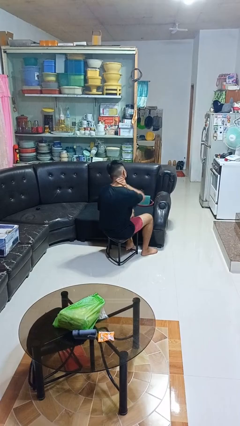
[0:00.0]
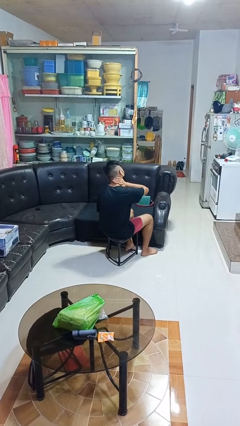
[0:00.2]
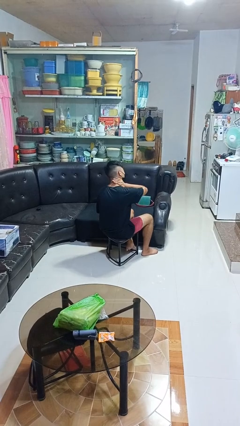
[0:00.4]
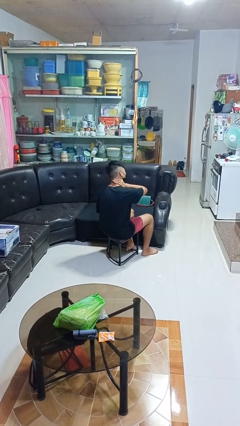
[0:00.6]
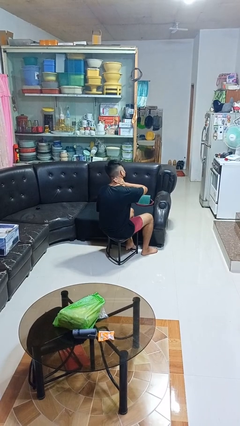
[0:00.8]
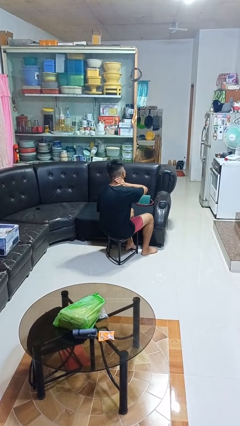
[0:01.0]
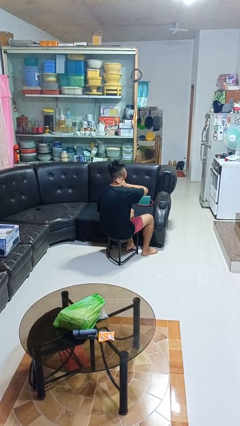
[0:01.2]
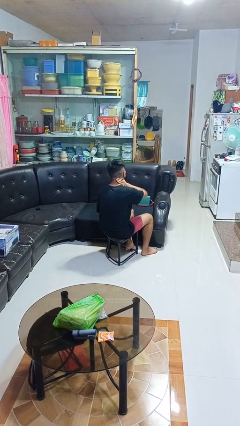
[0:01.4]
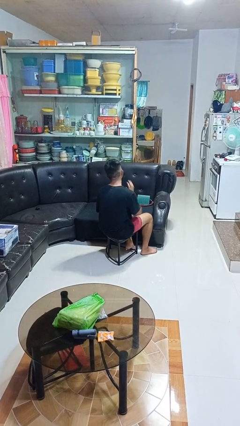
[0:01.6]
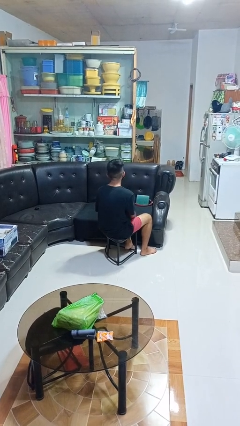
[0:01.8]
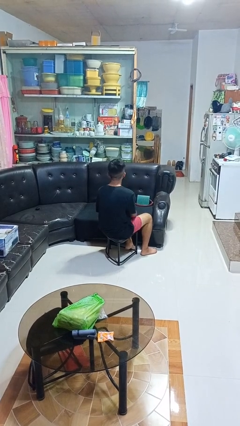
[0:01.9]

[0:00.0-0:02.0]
person swats bug

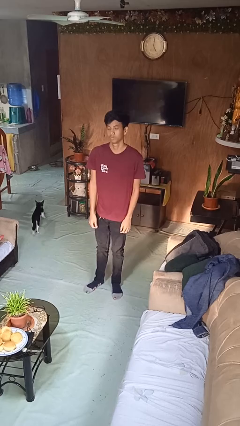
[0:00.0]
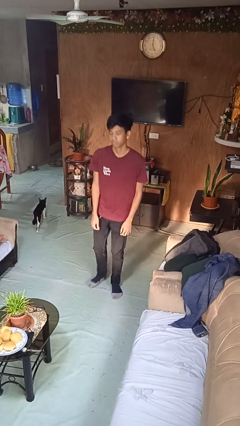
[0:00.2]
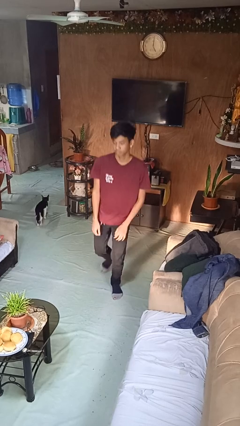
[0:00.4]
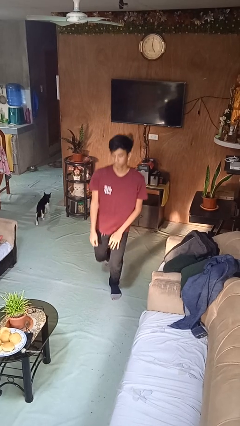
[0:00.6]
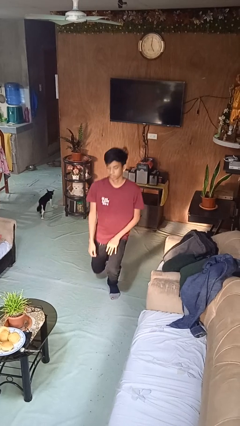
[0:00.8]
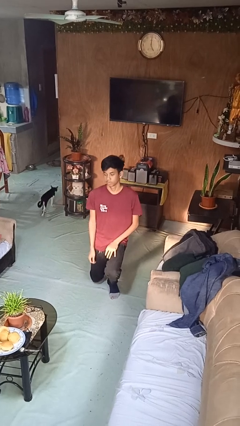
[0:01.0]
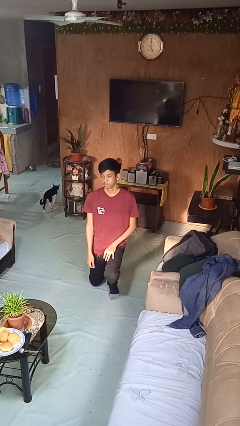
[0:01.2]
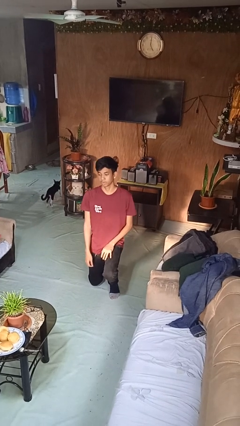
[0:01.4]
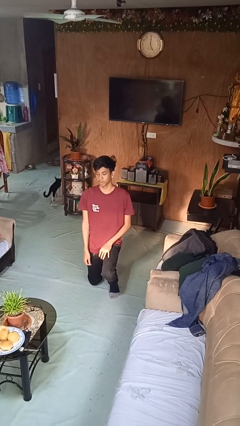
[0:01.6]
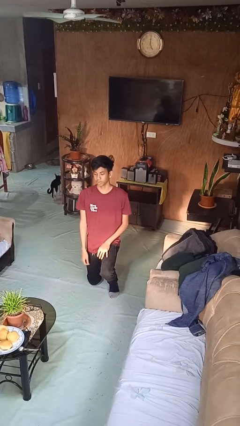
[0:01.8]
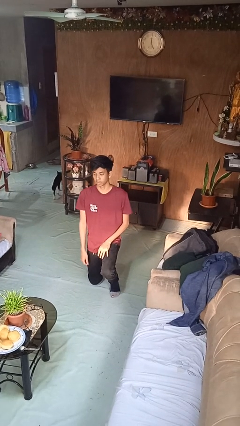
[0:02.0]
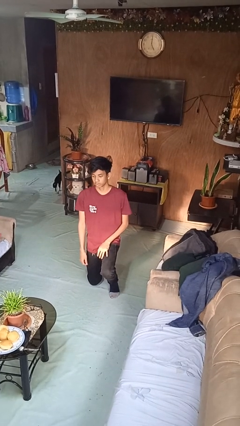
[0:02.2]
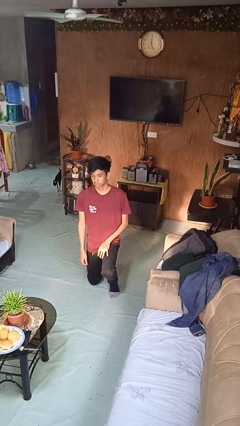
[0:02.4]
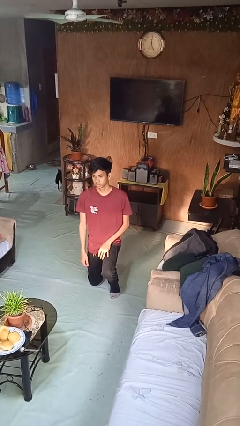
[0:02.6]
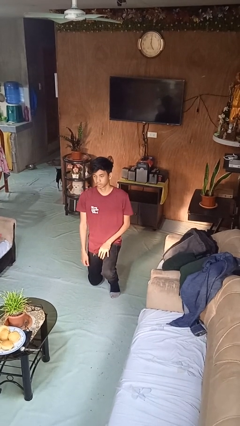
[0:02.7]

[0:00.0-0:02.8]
person kneels

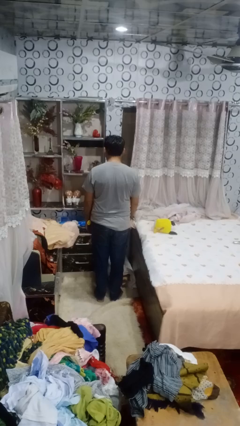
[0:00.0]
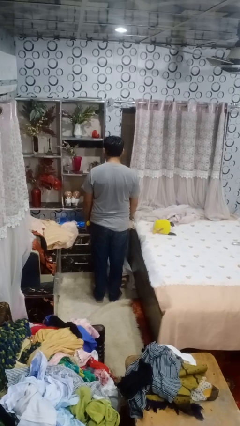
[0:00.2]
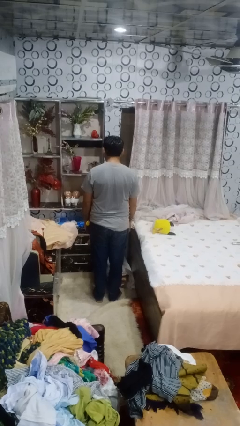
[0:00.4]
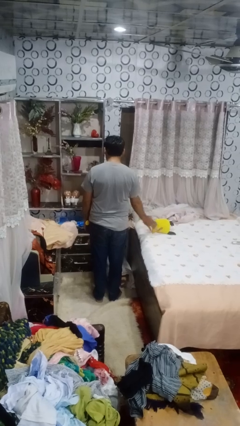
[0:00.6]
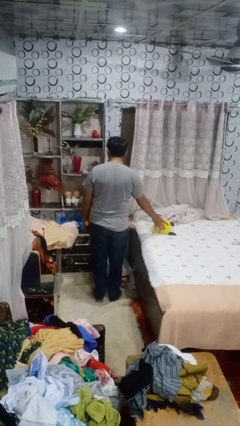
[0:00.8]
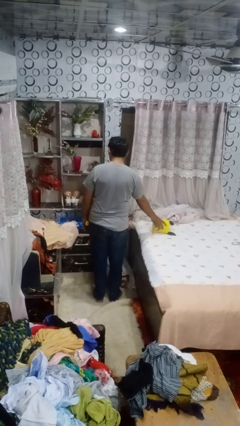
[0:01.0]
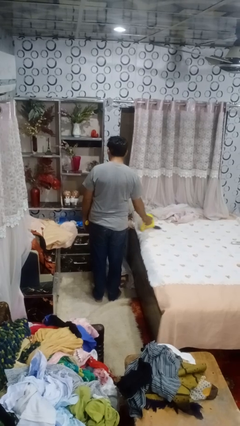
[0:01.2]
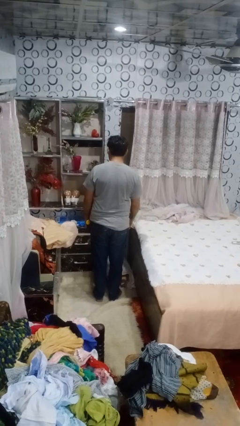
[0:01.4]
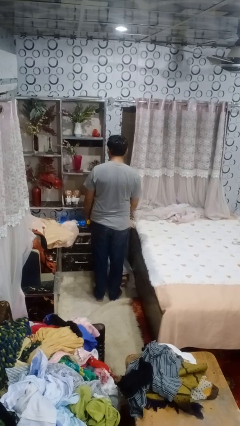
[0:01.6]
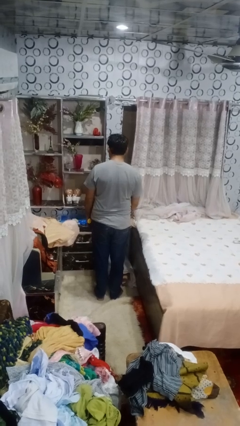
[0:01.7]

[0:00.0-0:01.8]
person picks up object from bed

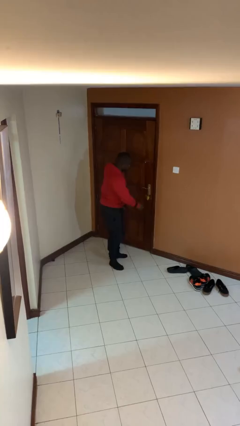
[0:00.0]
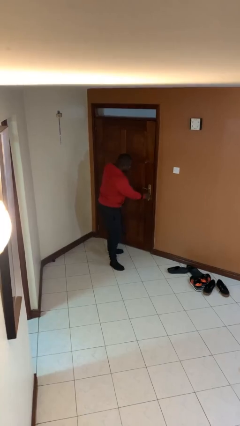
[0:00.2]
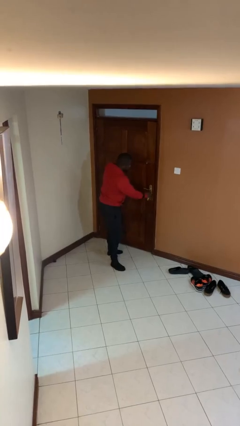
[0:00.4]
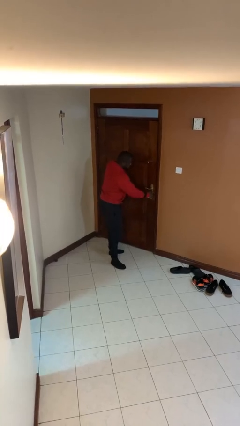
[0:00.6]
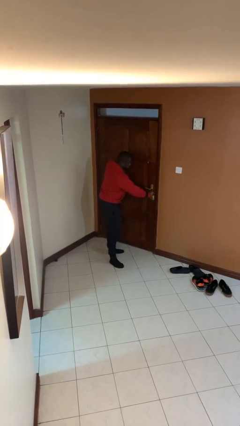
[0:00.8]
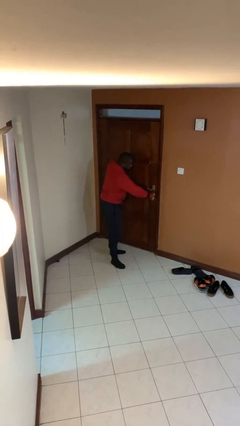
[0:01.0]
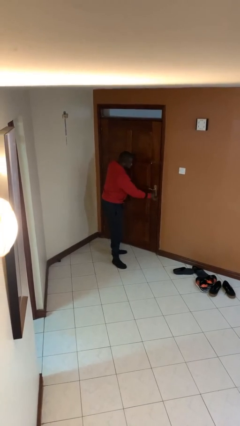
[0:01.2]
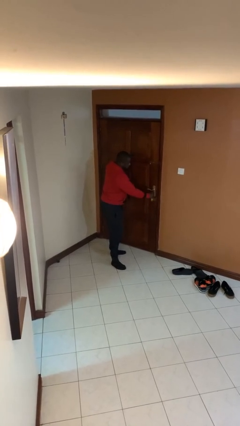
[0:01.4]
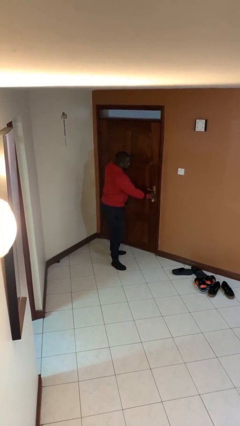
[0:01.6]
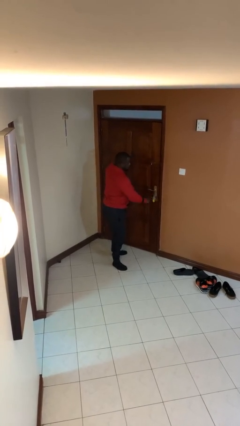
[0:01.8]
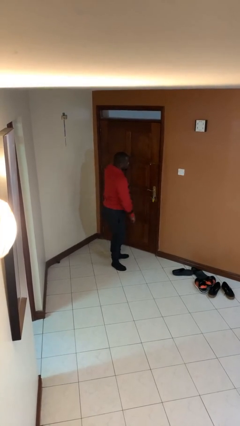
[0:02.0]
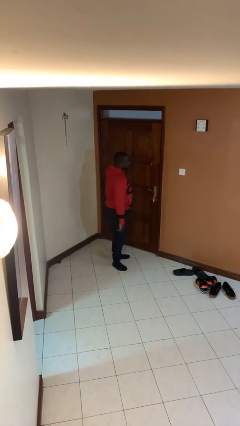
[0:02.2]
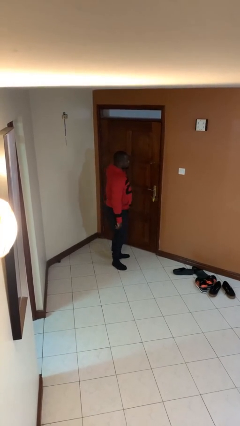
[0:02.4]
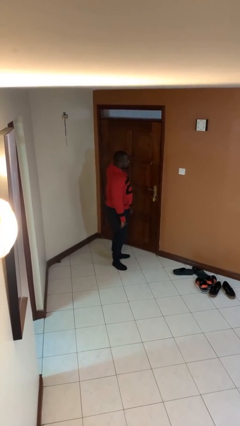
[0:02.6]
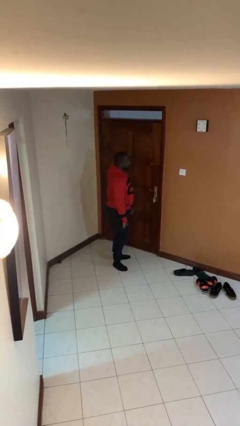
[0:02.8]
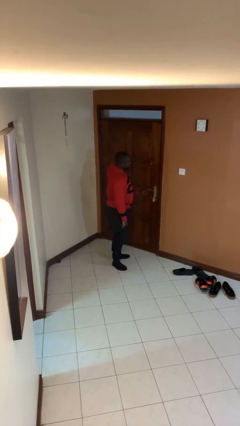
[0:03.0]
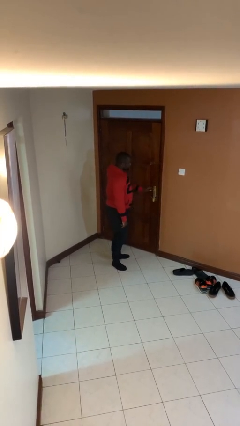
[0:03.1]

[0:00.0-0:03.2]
person unlocks door with keys

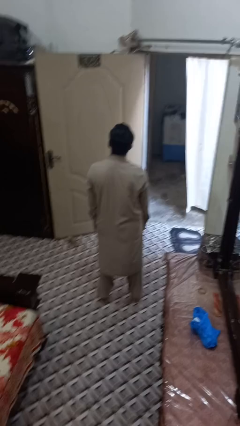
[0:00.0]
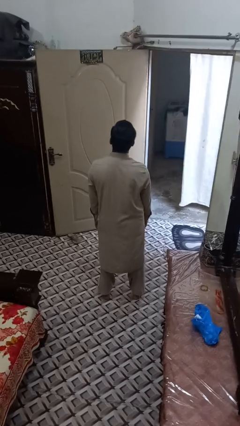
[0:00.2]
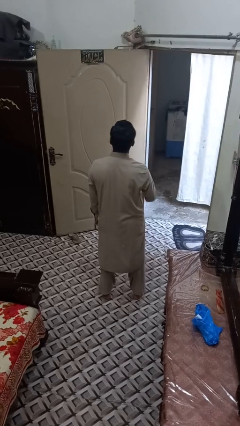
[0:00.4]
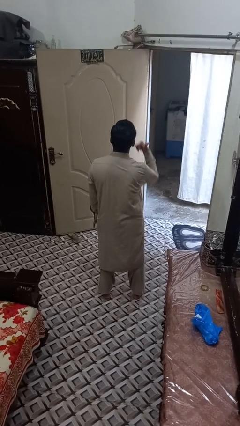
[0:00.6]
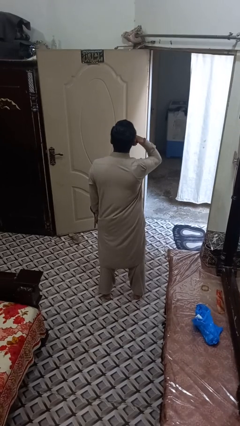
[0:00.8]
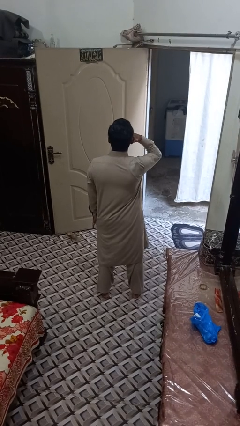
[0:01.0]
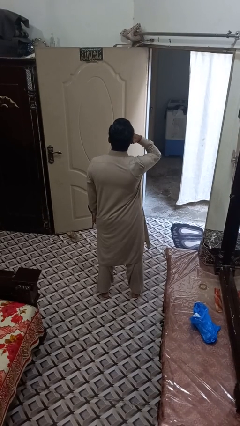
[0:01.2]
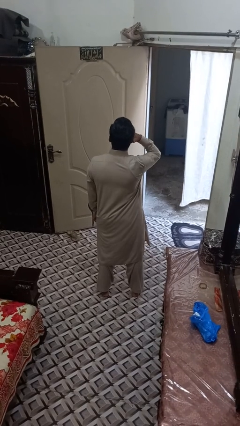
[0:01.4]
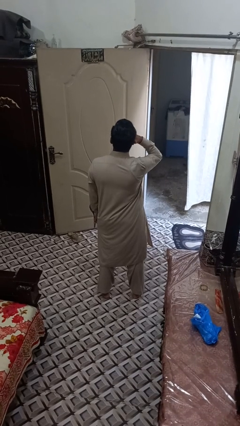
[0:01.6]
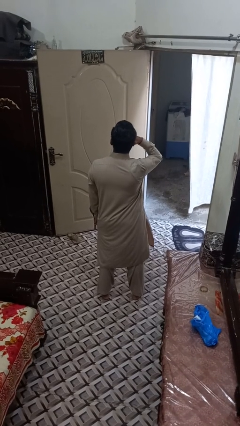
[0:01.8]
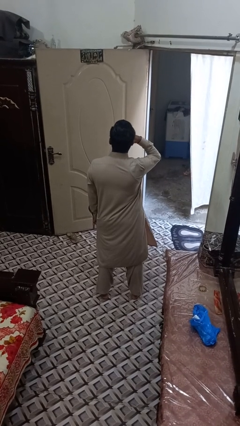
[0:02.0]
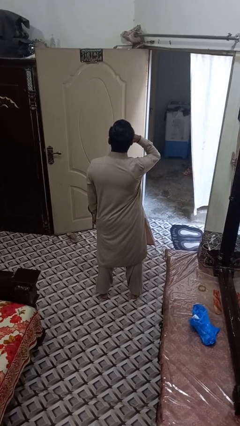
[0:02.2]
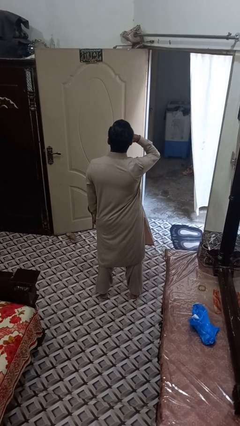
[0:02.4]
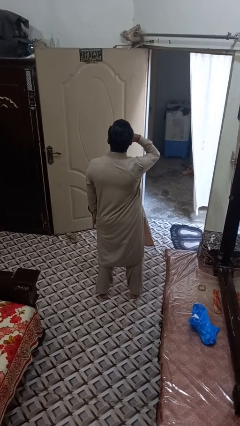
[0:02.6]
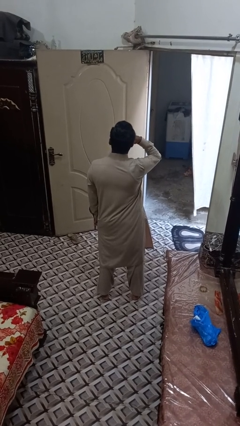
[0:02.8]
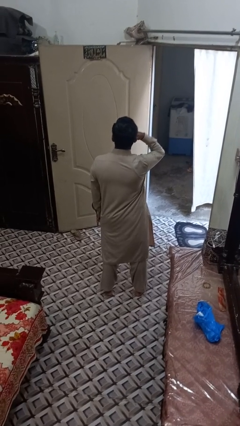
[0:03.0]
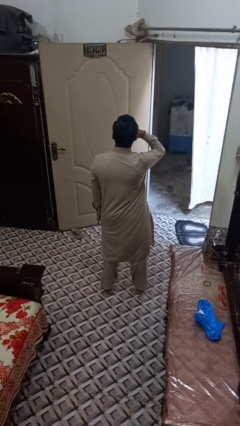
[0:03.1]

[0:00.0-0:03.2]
person gestures call me

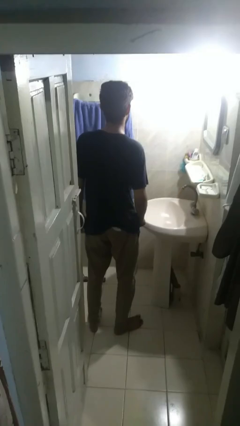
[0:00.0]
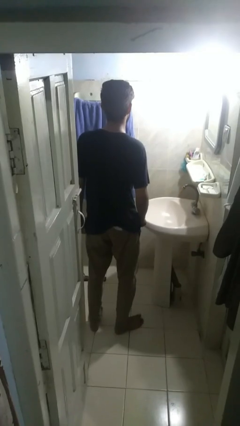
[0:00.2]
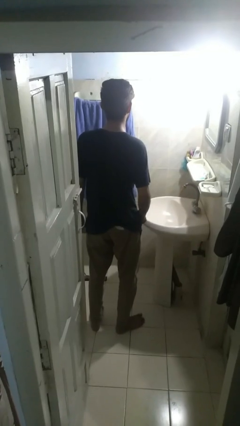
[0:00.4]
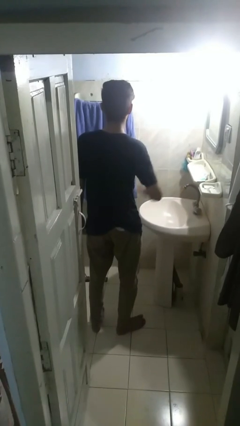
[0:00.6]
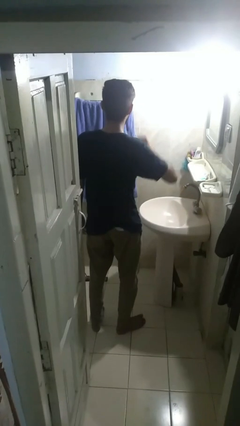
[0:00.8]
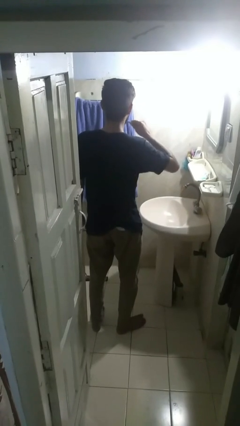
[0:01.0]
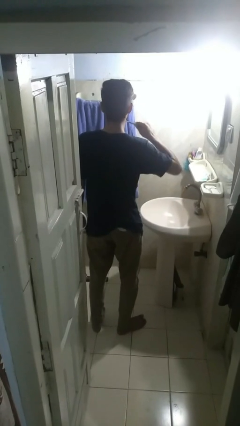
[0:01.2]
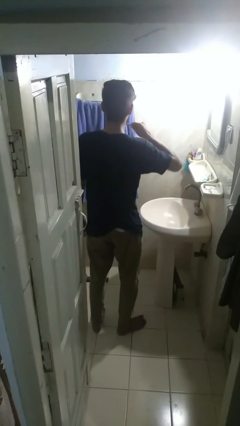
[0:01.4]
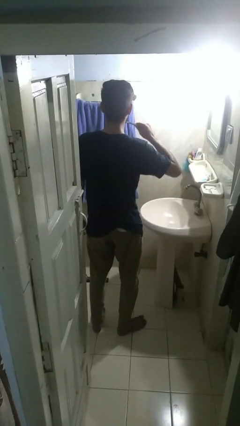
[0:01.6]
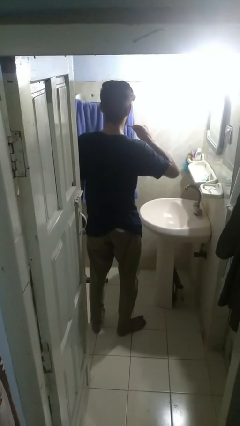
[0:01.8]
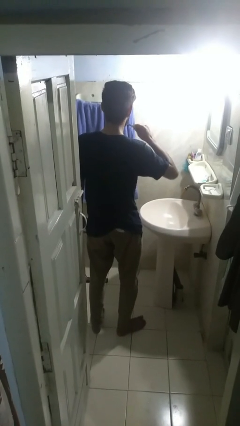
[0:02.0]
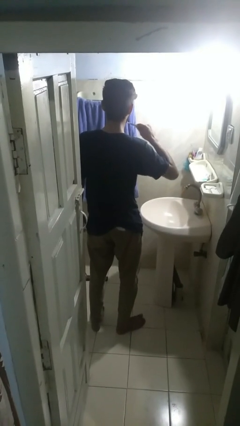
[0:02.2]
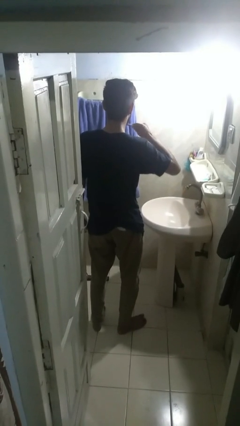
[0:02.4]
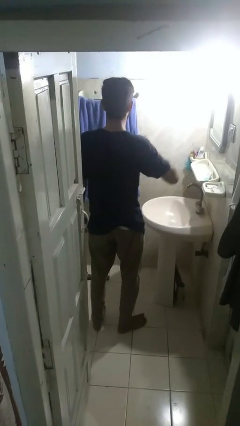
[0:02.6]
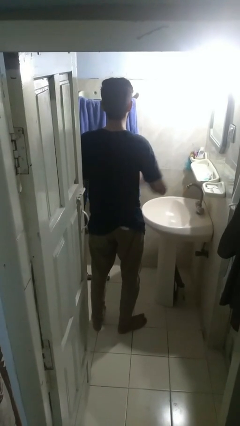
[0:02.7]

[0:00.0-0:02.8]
person brushes teeth

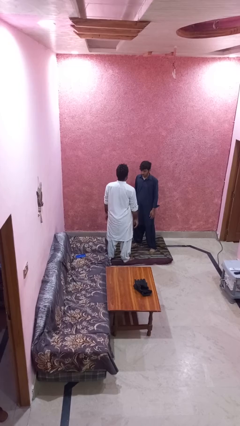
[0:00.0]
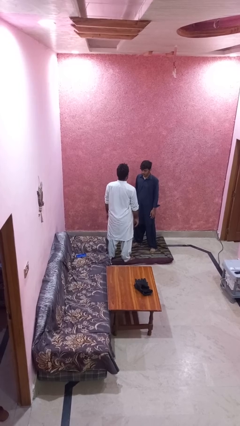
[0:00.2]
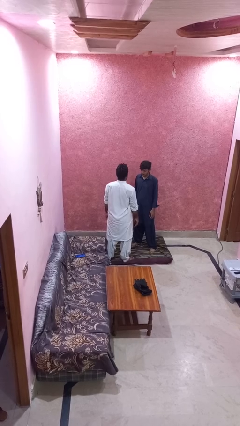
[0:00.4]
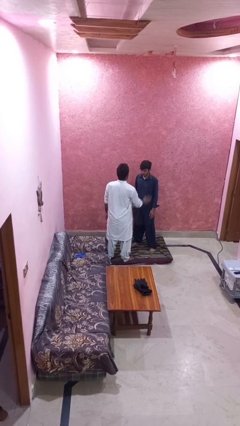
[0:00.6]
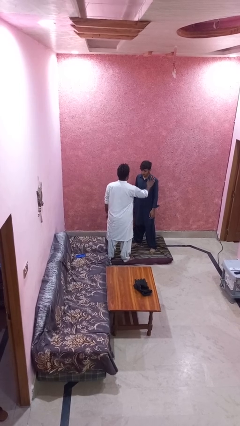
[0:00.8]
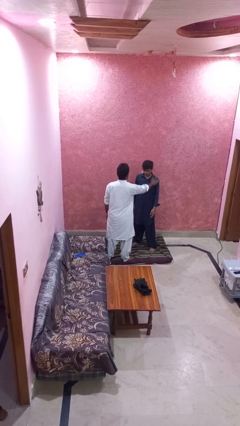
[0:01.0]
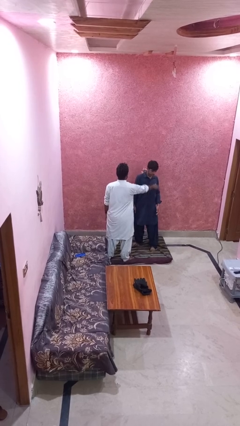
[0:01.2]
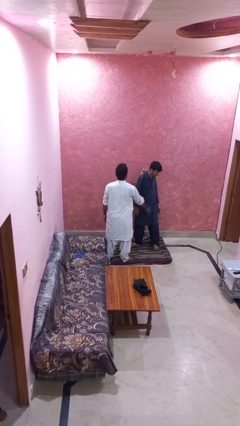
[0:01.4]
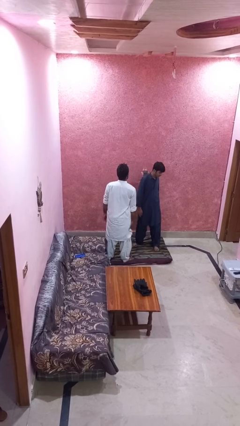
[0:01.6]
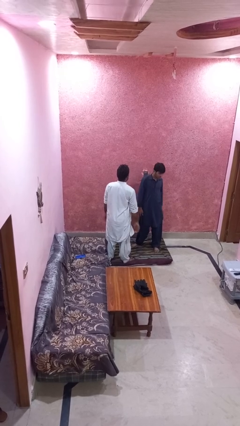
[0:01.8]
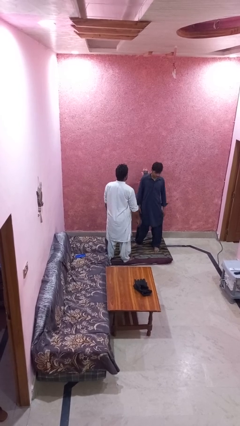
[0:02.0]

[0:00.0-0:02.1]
person shoves person
